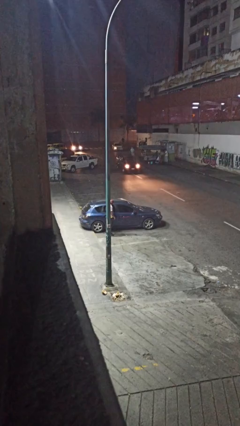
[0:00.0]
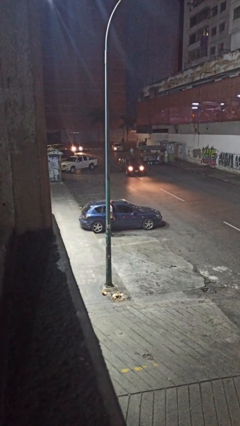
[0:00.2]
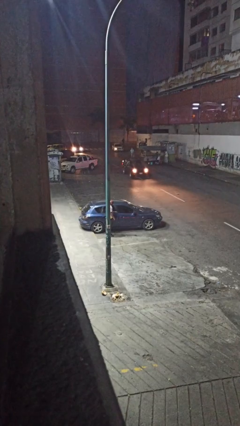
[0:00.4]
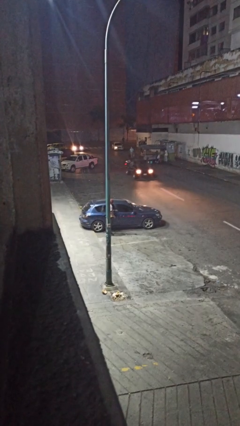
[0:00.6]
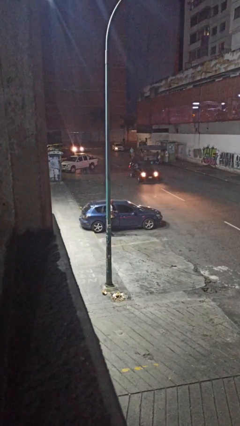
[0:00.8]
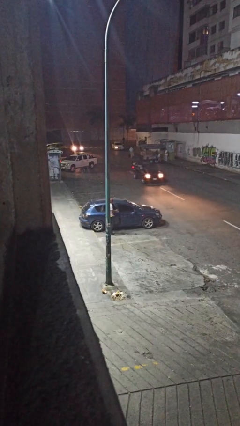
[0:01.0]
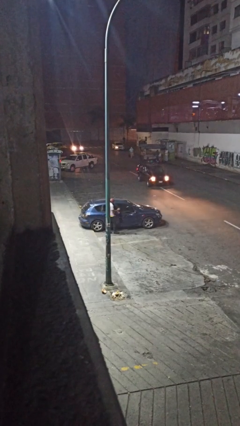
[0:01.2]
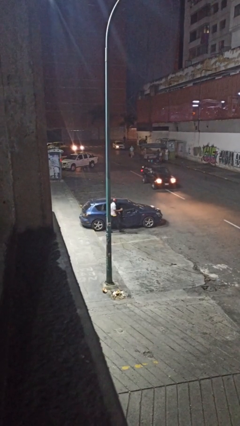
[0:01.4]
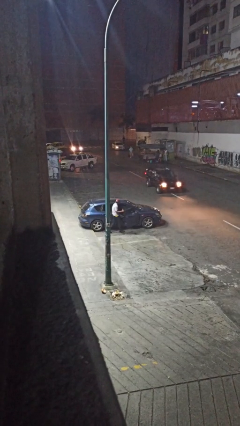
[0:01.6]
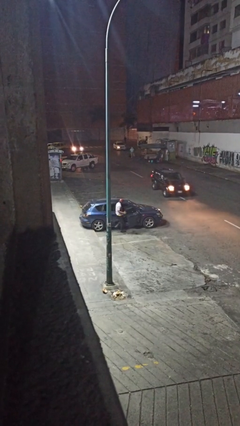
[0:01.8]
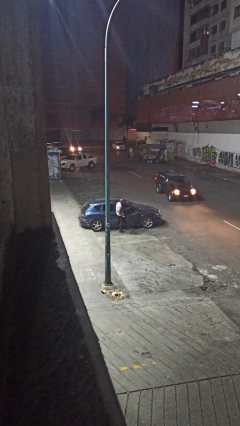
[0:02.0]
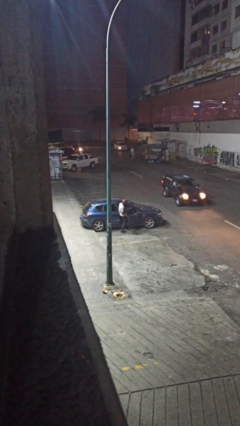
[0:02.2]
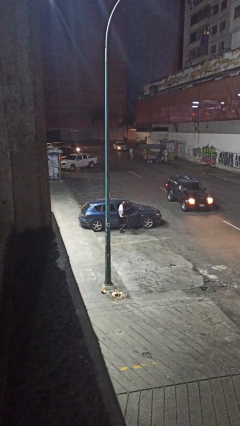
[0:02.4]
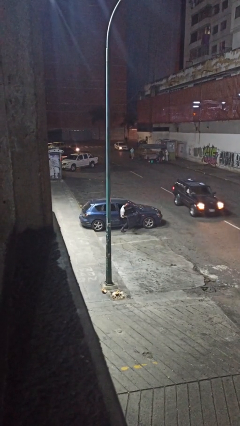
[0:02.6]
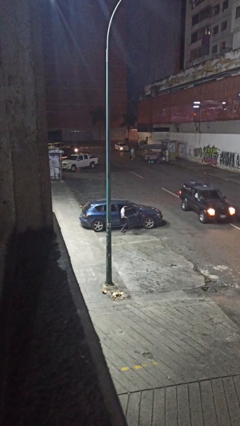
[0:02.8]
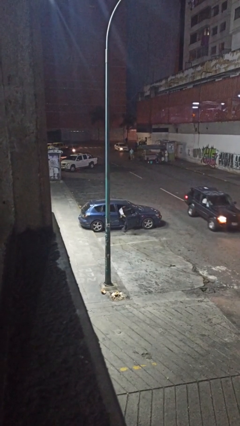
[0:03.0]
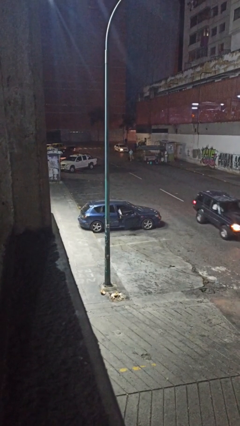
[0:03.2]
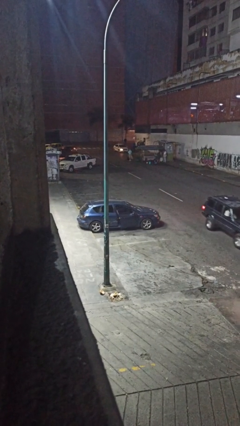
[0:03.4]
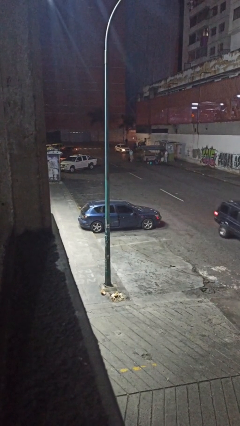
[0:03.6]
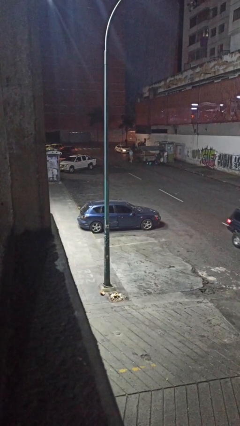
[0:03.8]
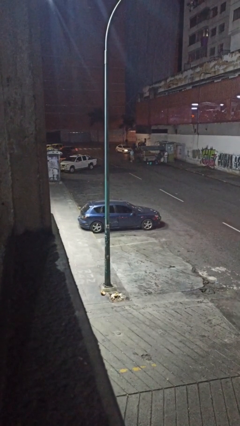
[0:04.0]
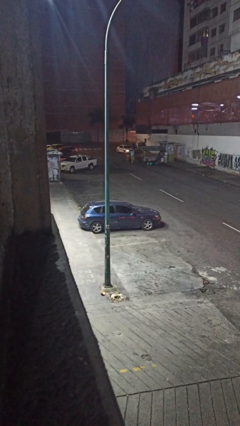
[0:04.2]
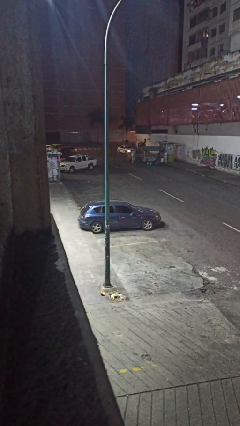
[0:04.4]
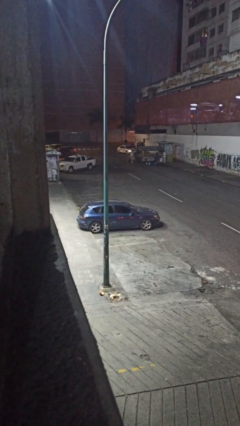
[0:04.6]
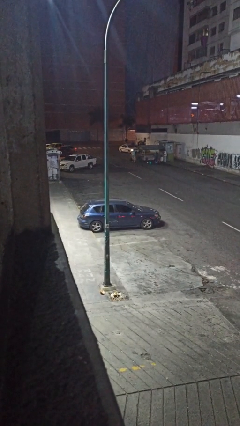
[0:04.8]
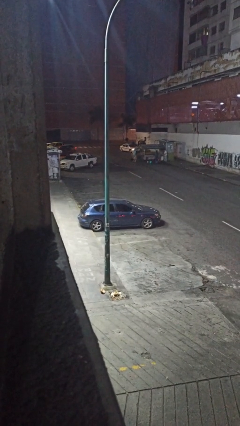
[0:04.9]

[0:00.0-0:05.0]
car picks up person

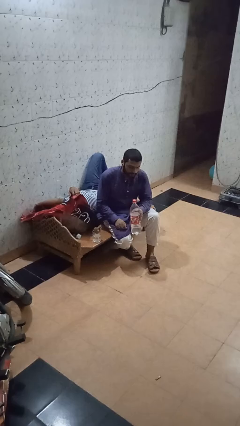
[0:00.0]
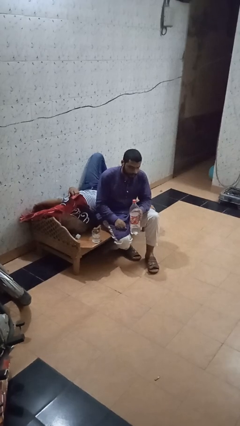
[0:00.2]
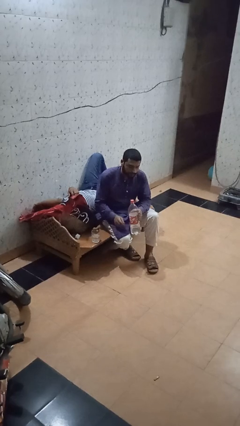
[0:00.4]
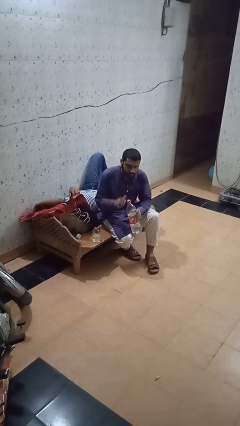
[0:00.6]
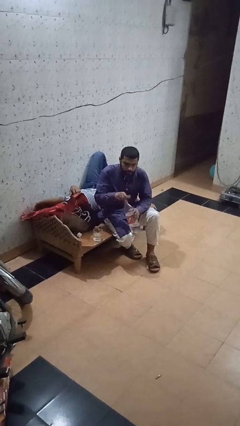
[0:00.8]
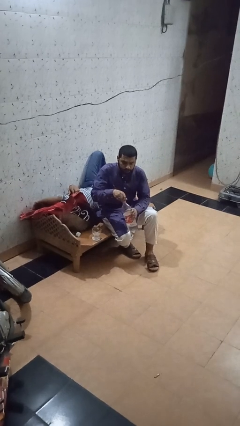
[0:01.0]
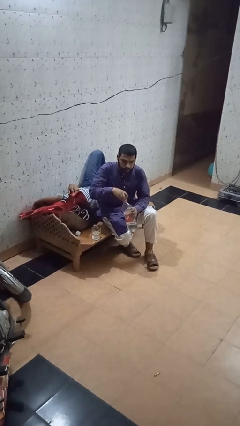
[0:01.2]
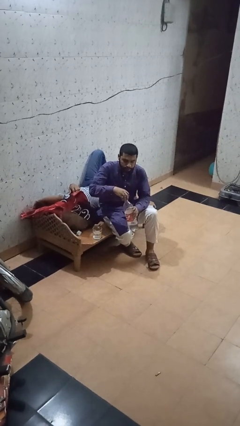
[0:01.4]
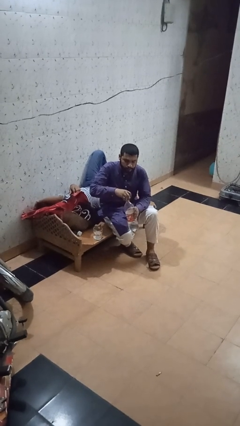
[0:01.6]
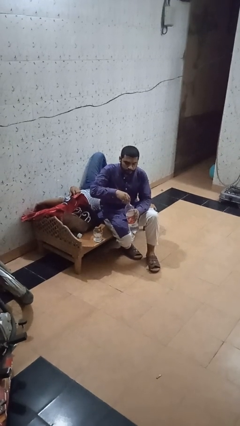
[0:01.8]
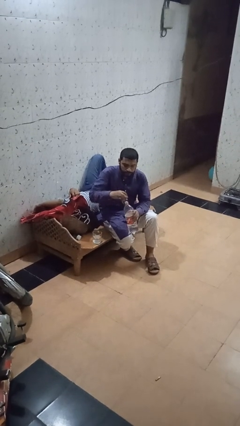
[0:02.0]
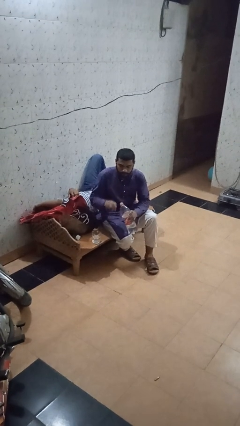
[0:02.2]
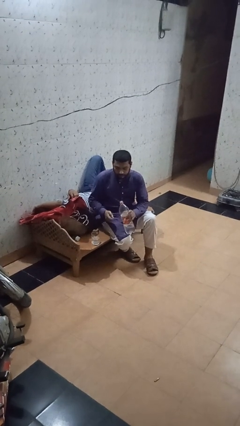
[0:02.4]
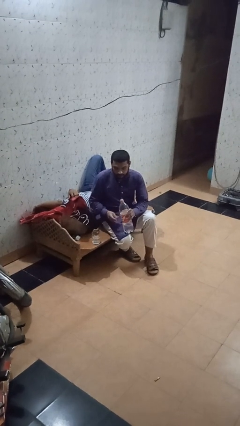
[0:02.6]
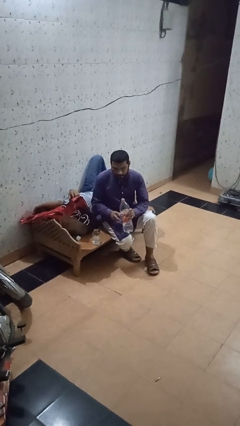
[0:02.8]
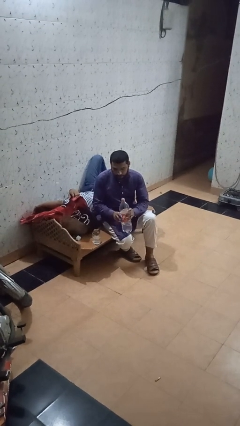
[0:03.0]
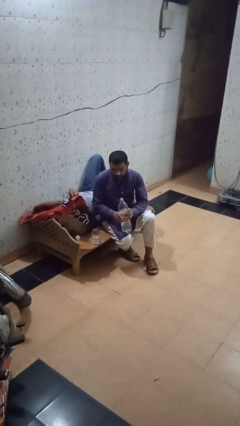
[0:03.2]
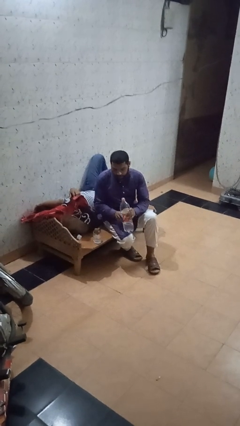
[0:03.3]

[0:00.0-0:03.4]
person unscrews lid from bottle

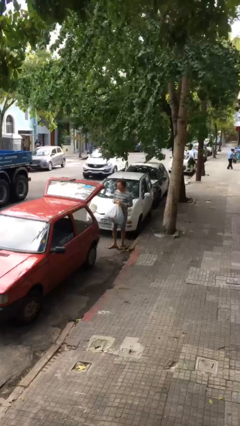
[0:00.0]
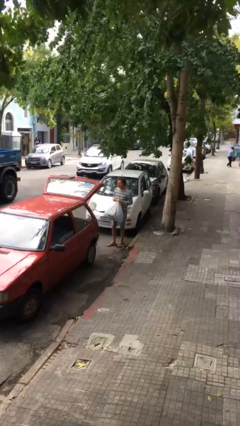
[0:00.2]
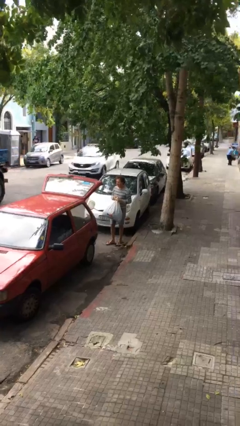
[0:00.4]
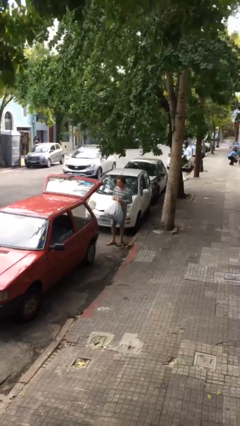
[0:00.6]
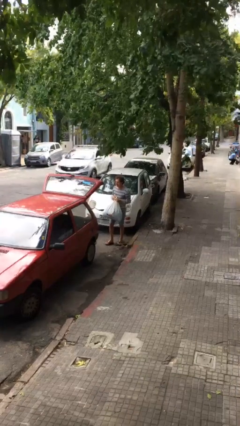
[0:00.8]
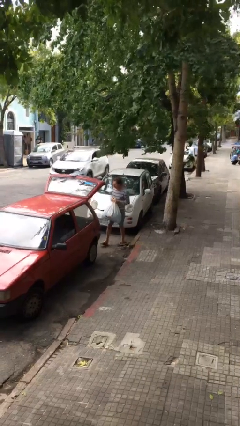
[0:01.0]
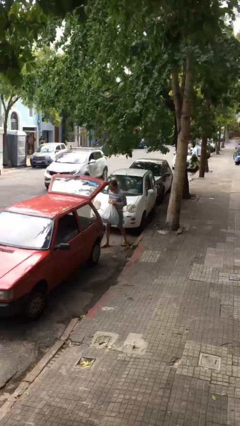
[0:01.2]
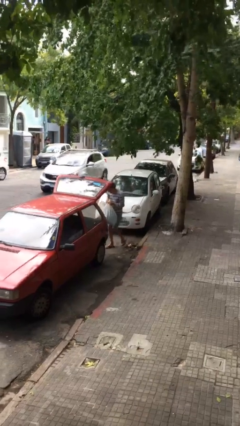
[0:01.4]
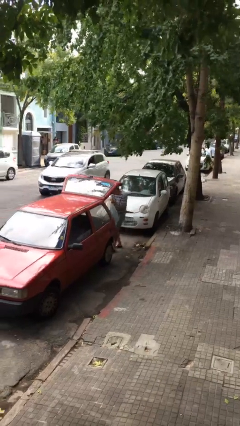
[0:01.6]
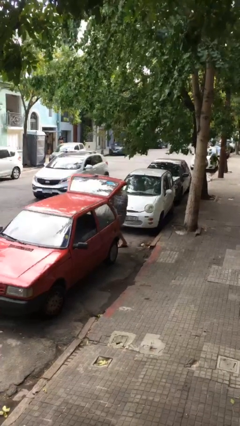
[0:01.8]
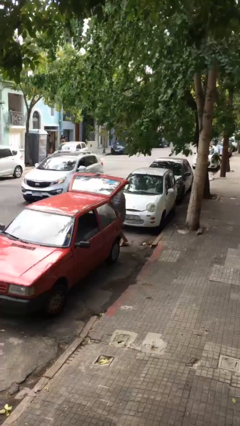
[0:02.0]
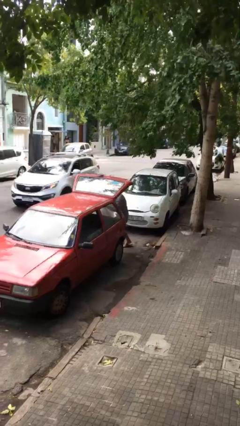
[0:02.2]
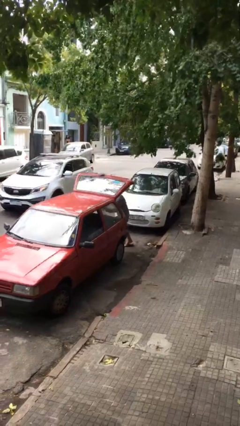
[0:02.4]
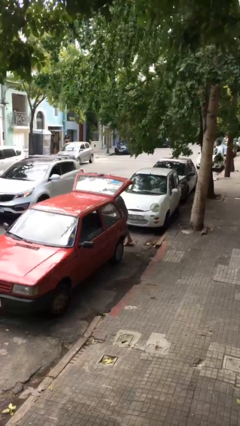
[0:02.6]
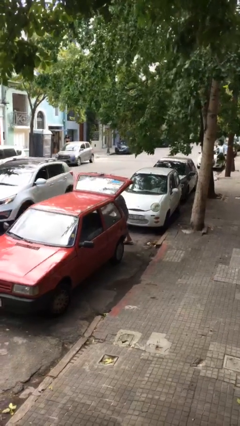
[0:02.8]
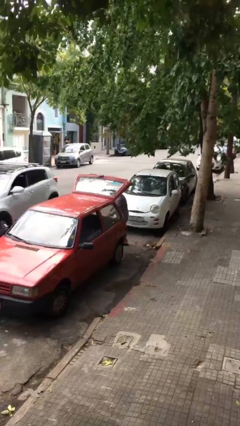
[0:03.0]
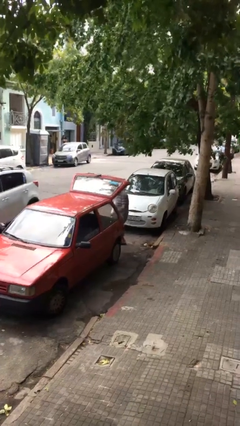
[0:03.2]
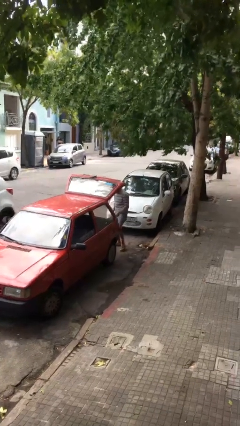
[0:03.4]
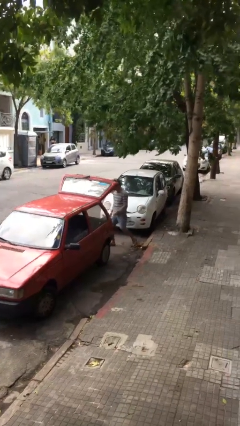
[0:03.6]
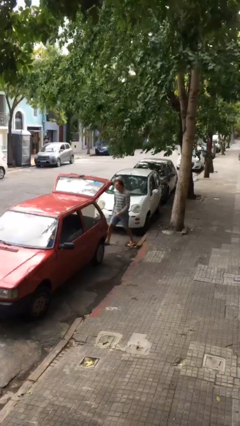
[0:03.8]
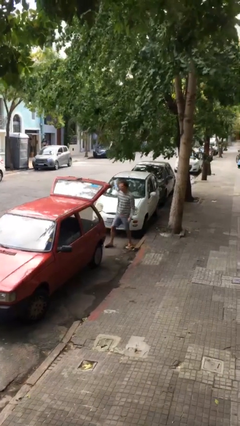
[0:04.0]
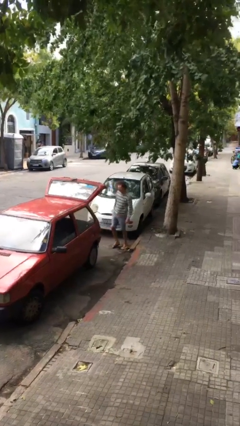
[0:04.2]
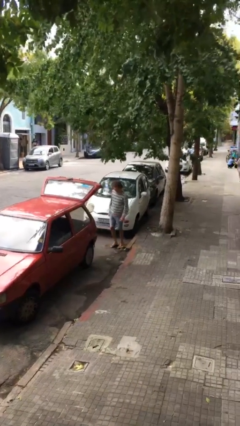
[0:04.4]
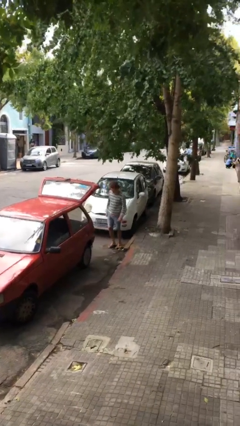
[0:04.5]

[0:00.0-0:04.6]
person loads car

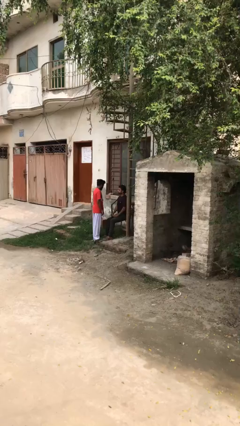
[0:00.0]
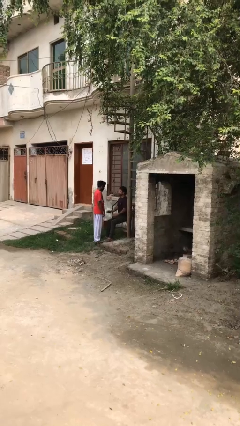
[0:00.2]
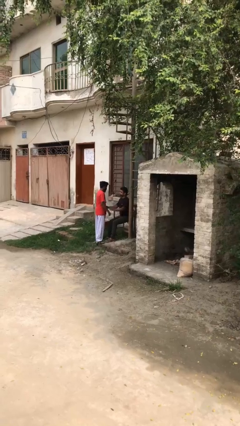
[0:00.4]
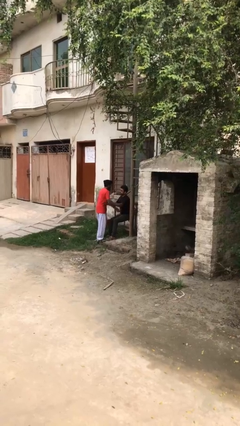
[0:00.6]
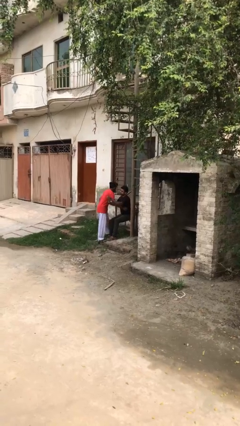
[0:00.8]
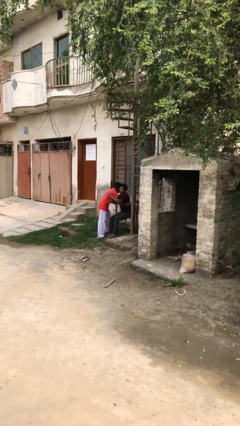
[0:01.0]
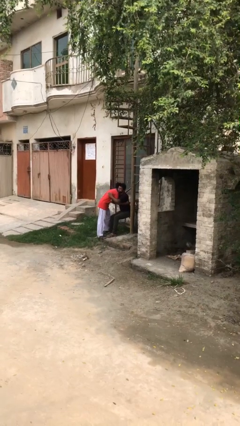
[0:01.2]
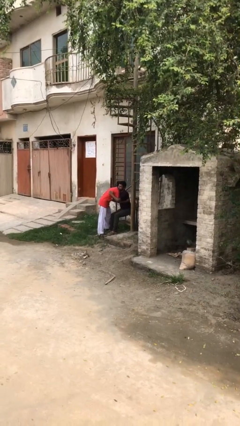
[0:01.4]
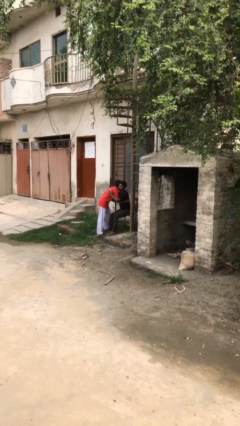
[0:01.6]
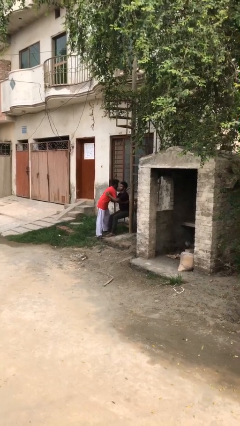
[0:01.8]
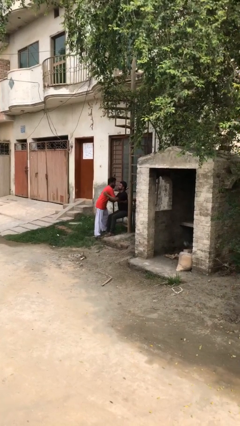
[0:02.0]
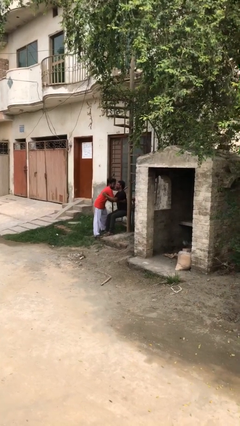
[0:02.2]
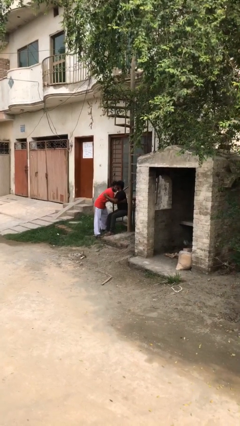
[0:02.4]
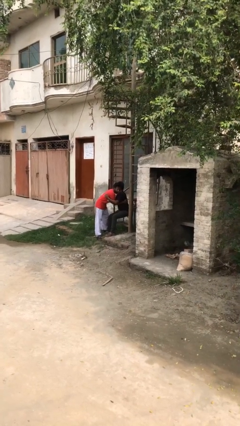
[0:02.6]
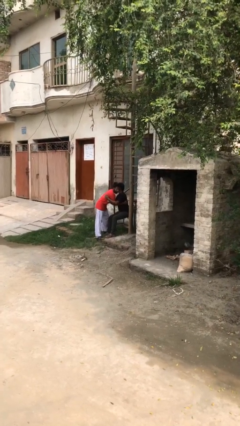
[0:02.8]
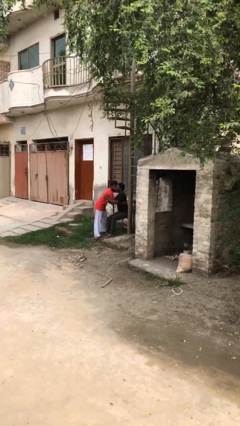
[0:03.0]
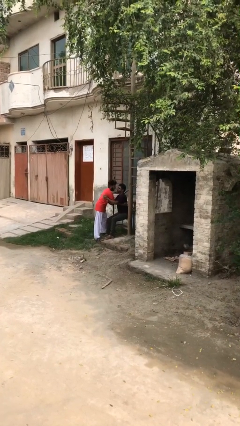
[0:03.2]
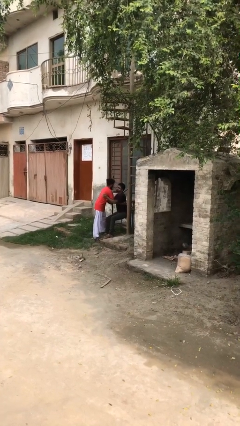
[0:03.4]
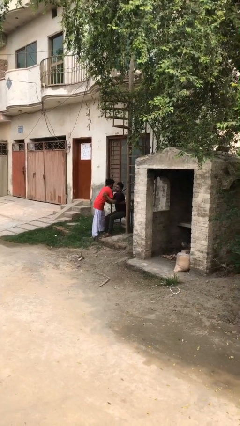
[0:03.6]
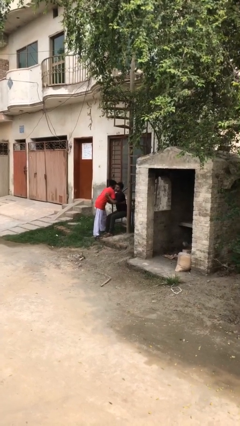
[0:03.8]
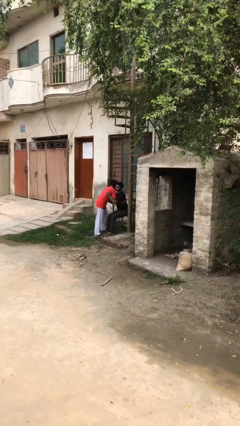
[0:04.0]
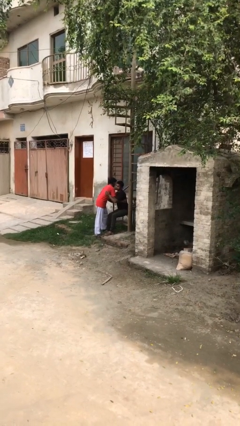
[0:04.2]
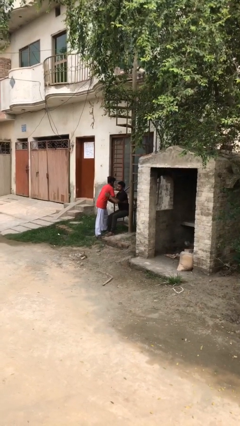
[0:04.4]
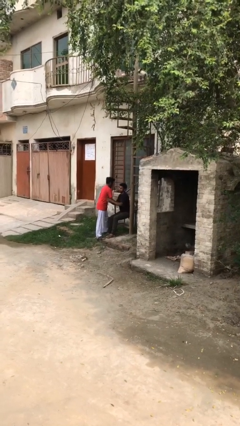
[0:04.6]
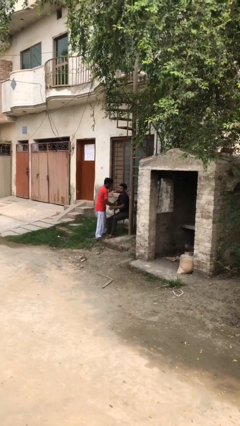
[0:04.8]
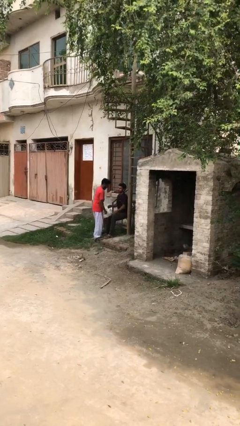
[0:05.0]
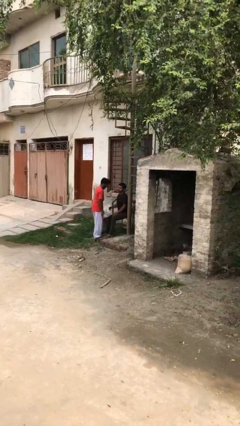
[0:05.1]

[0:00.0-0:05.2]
person embraces person
